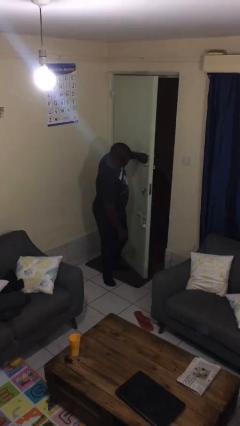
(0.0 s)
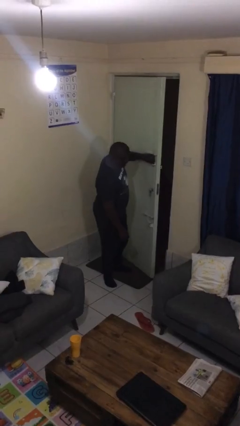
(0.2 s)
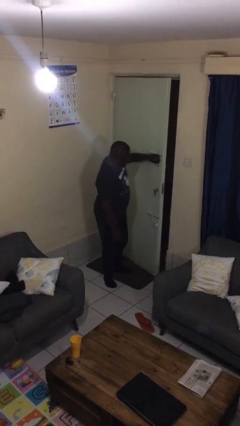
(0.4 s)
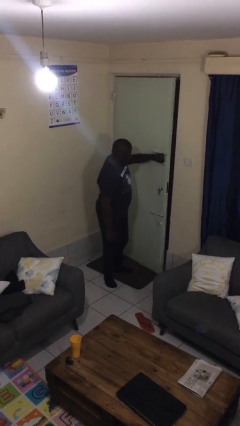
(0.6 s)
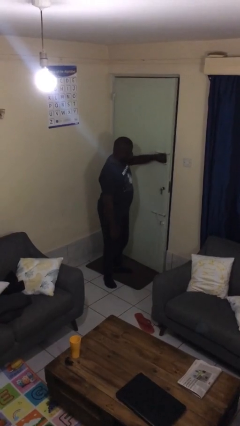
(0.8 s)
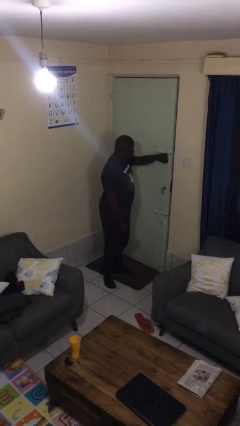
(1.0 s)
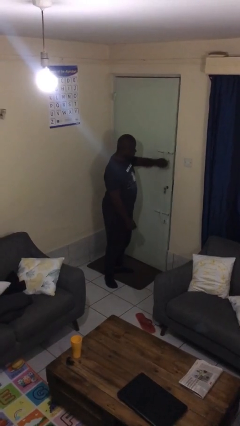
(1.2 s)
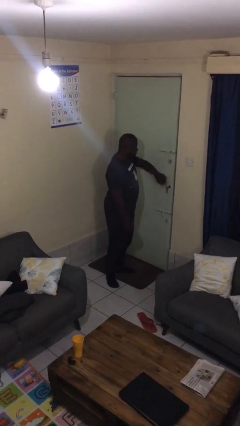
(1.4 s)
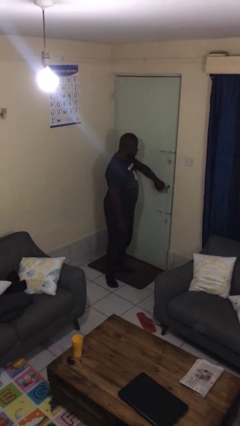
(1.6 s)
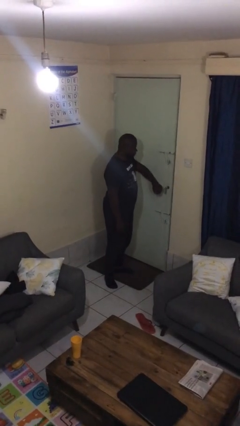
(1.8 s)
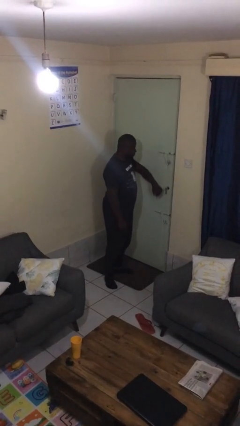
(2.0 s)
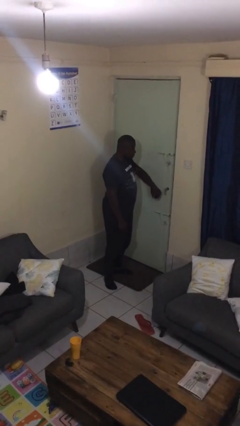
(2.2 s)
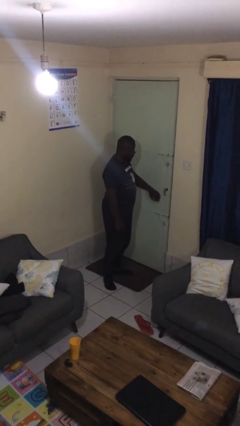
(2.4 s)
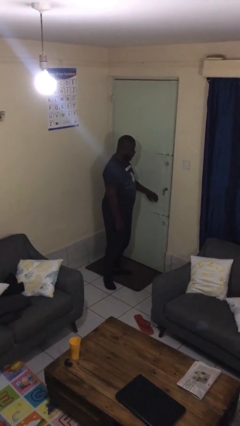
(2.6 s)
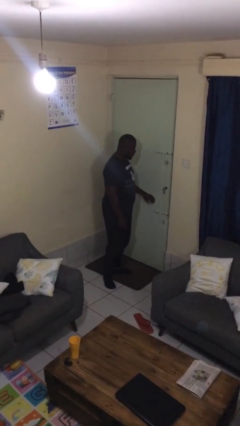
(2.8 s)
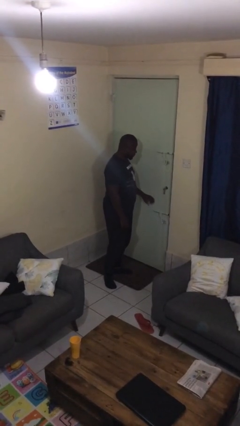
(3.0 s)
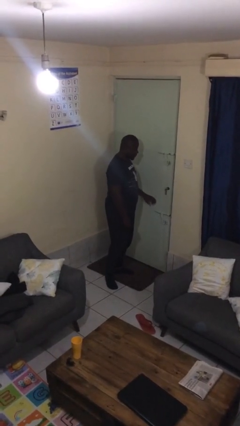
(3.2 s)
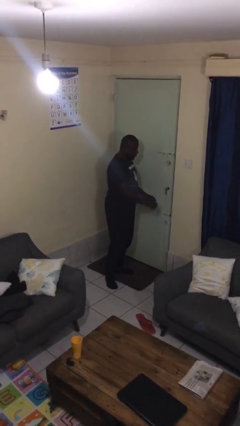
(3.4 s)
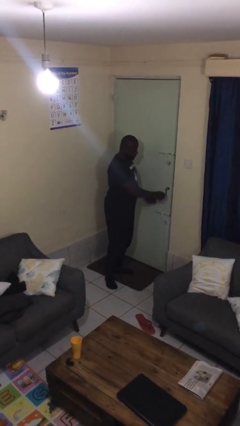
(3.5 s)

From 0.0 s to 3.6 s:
person closes facility door

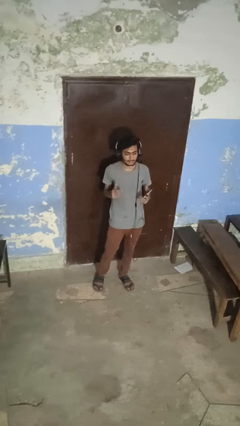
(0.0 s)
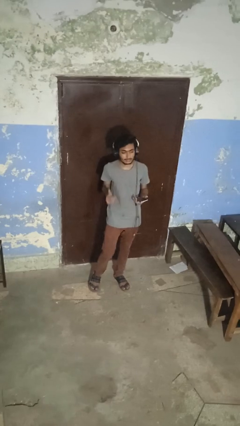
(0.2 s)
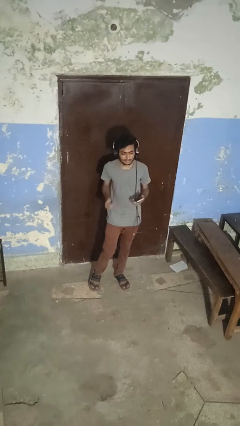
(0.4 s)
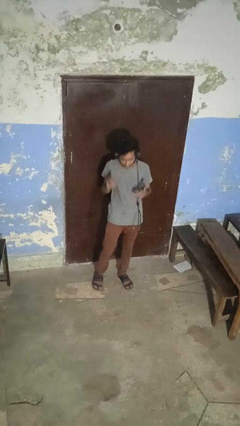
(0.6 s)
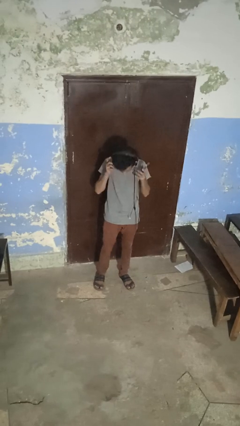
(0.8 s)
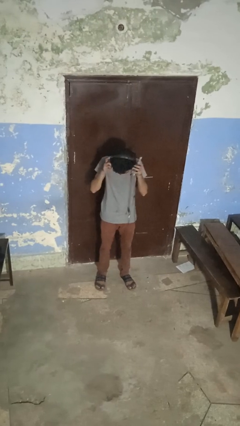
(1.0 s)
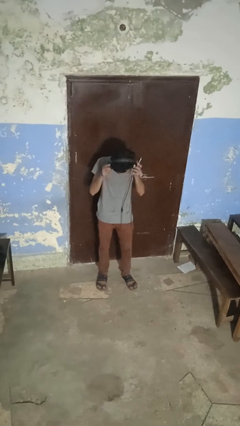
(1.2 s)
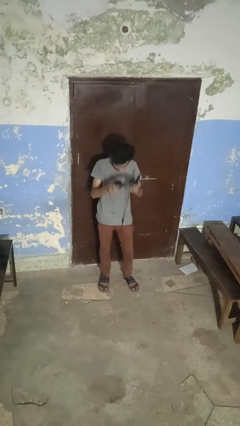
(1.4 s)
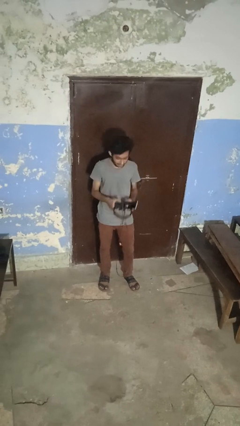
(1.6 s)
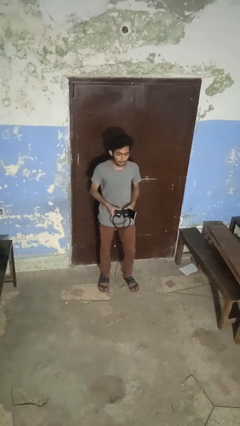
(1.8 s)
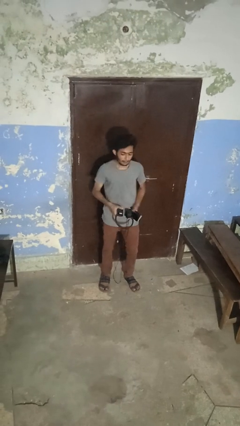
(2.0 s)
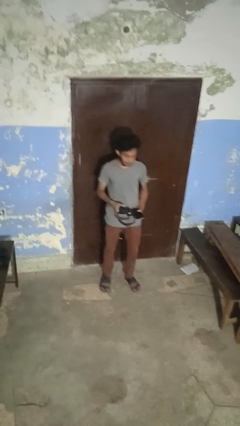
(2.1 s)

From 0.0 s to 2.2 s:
person takes off headphones

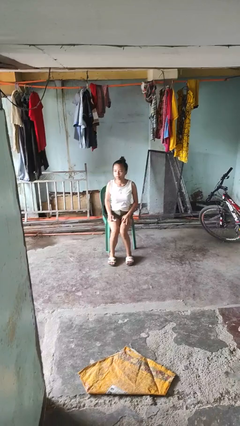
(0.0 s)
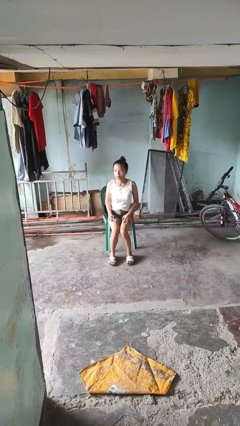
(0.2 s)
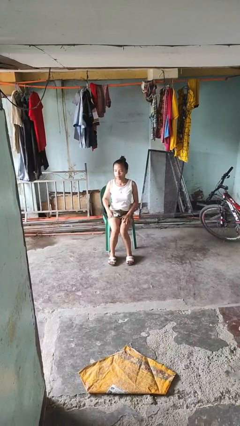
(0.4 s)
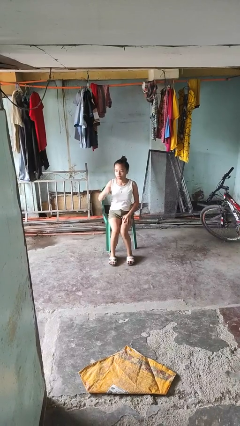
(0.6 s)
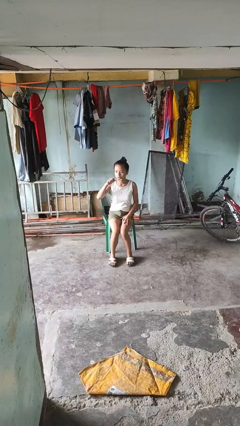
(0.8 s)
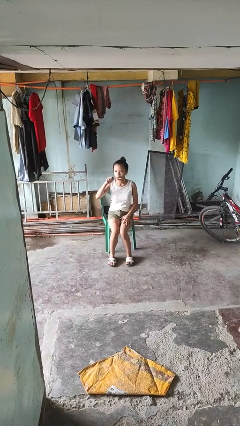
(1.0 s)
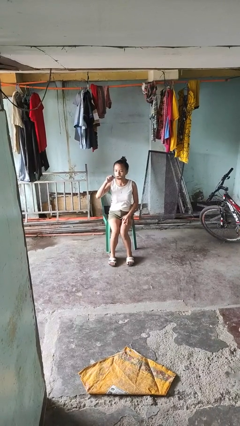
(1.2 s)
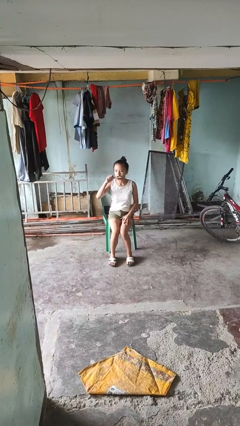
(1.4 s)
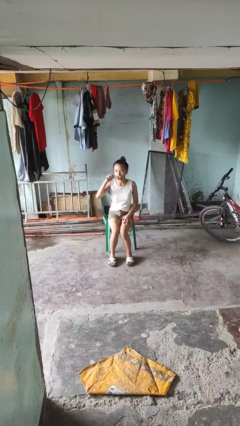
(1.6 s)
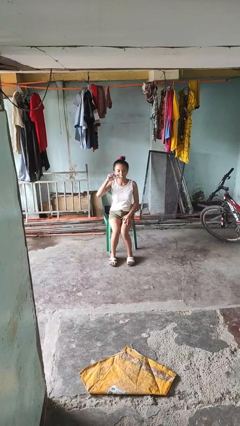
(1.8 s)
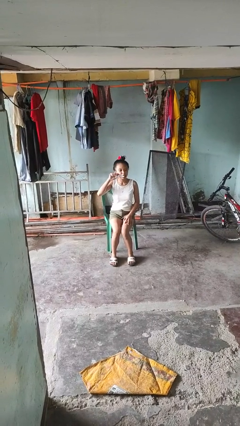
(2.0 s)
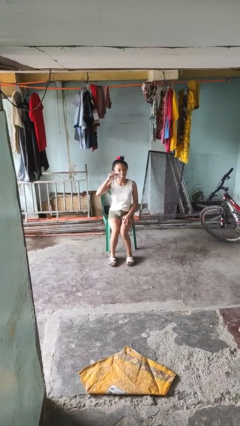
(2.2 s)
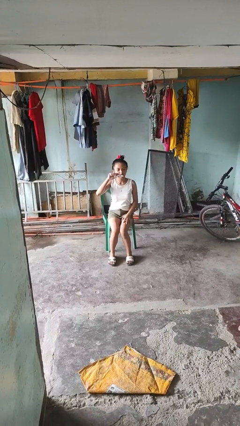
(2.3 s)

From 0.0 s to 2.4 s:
person brushes teeth

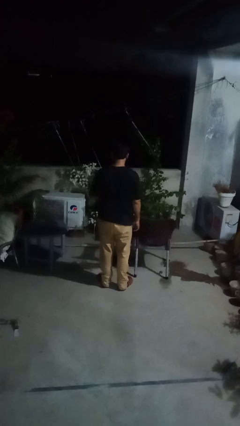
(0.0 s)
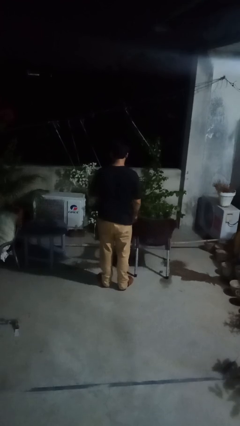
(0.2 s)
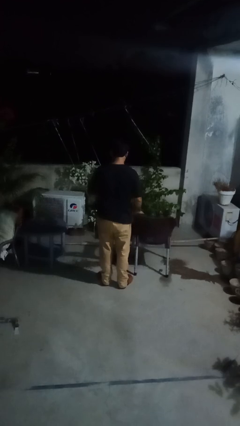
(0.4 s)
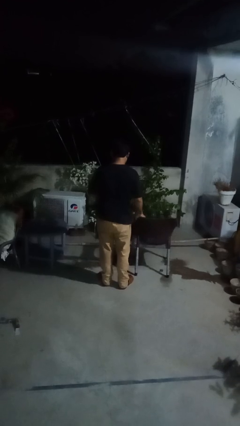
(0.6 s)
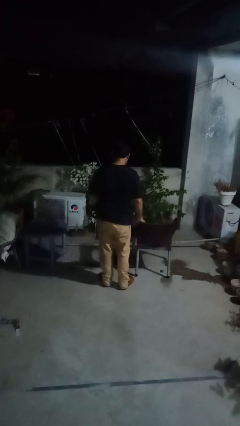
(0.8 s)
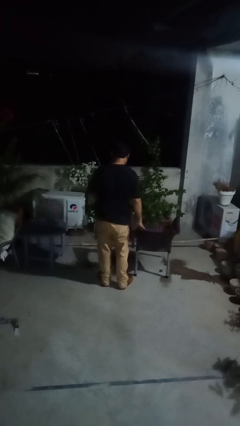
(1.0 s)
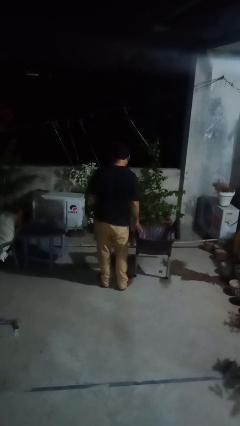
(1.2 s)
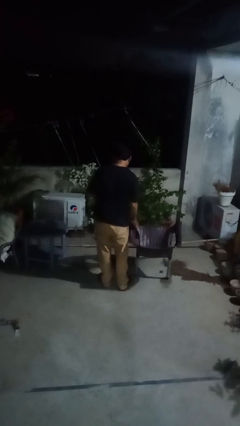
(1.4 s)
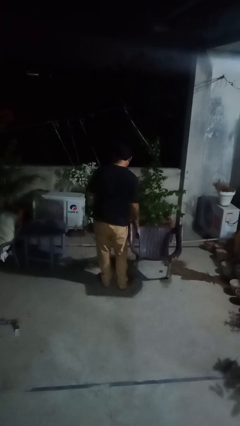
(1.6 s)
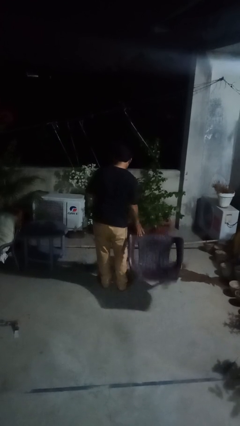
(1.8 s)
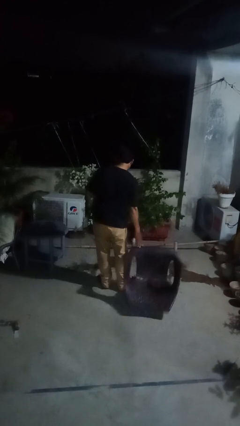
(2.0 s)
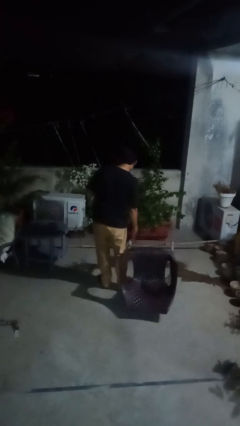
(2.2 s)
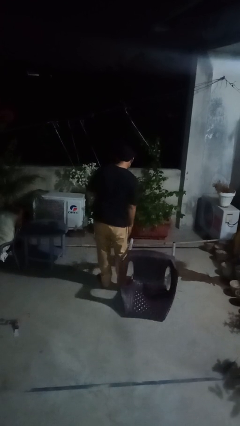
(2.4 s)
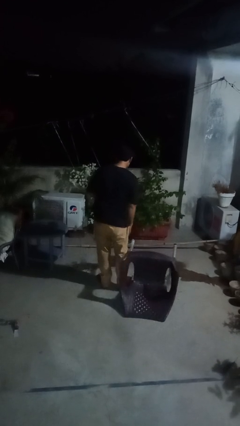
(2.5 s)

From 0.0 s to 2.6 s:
person knocks over furniture

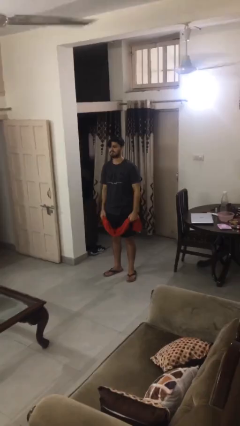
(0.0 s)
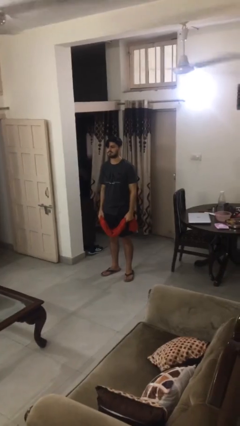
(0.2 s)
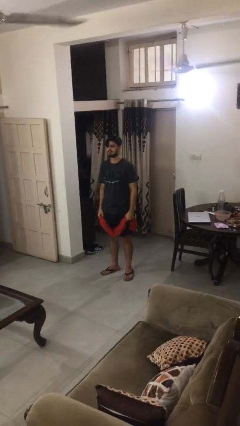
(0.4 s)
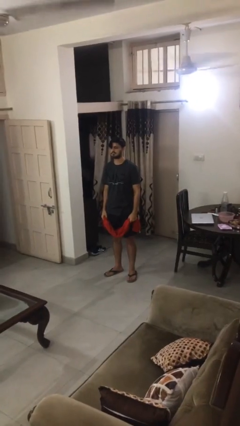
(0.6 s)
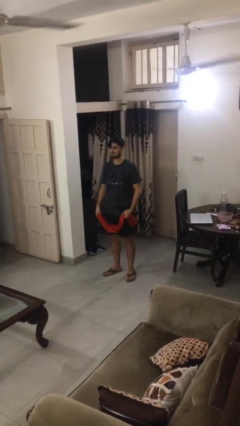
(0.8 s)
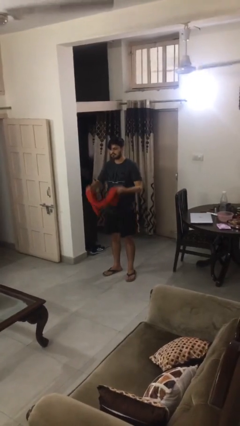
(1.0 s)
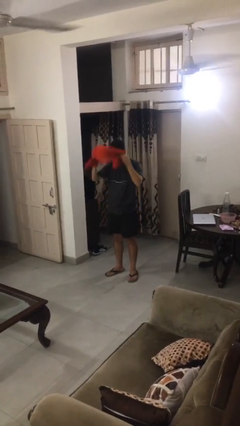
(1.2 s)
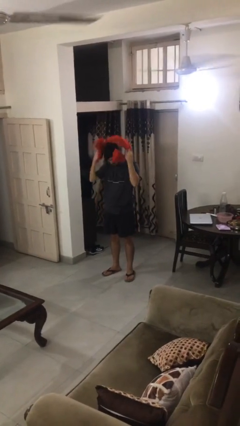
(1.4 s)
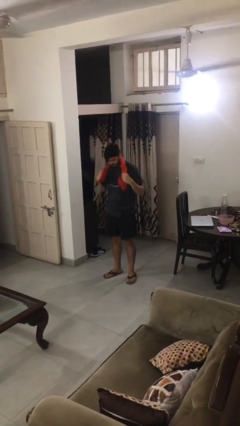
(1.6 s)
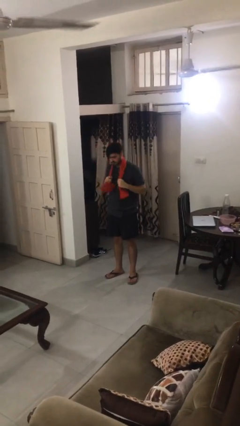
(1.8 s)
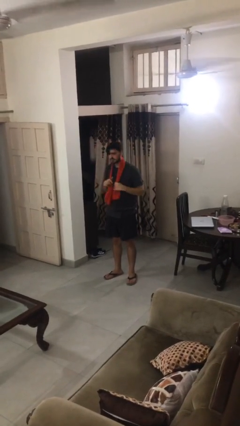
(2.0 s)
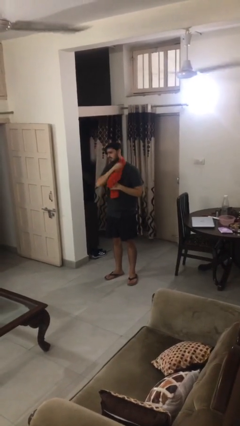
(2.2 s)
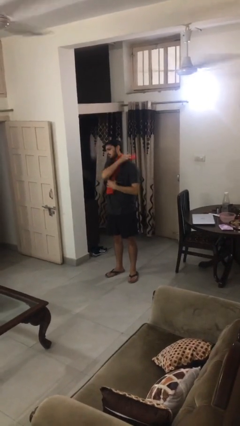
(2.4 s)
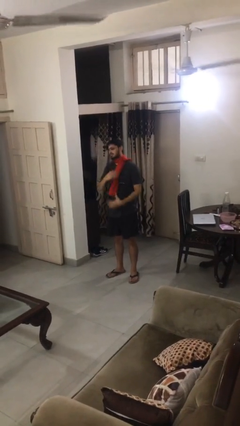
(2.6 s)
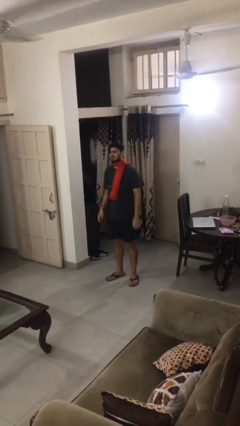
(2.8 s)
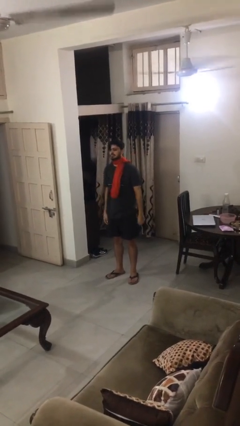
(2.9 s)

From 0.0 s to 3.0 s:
person puts on scarf

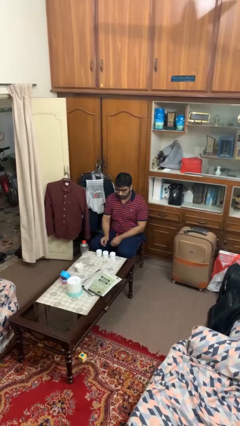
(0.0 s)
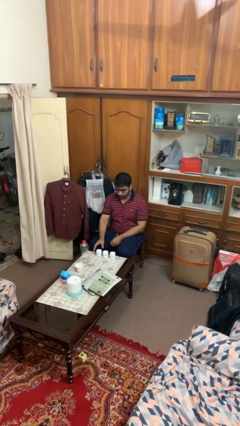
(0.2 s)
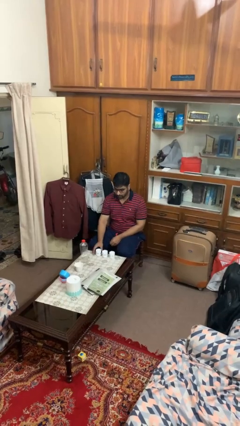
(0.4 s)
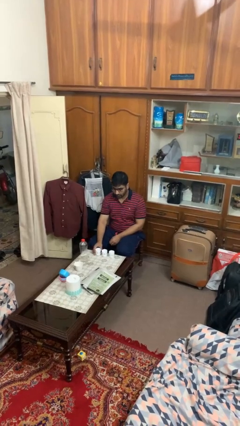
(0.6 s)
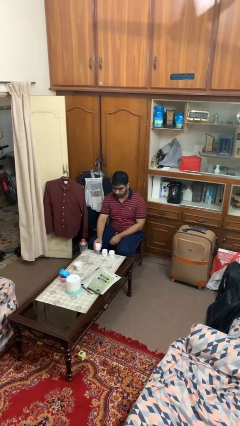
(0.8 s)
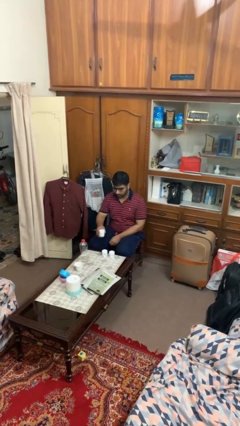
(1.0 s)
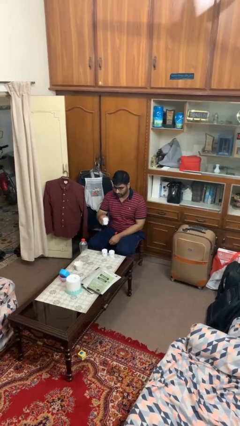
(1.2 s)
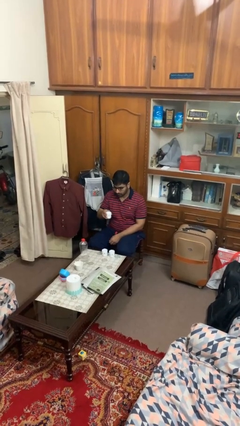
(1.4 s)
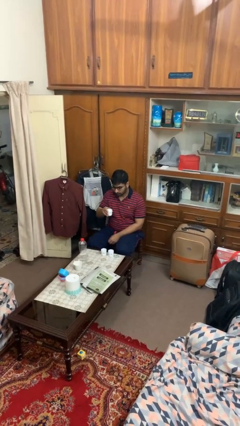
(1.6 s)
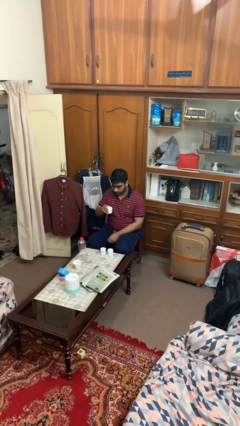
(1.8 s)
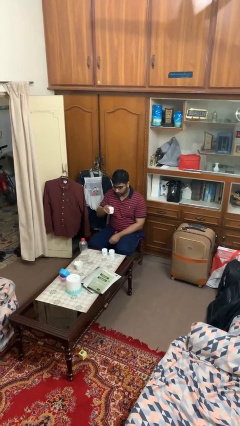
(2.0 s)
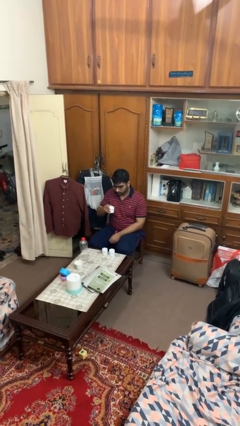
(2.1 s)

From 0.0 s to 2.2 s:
person picks up object from table

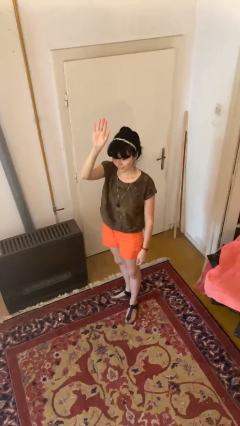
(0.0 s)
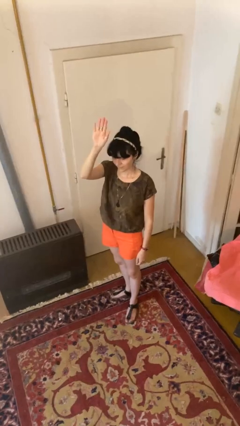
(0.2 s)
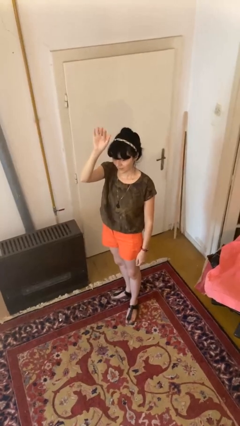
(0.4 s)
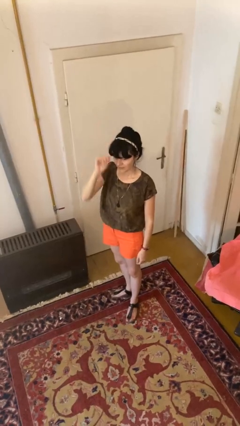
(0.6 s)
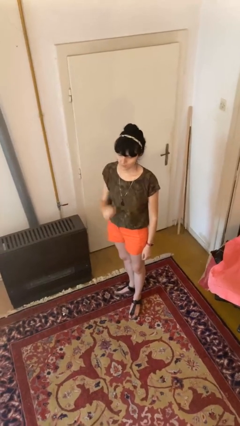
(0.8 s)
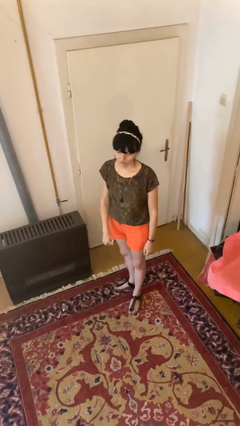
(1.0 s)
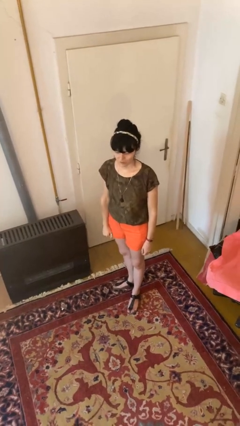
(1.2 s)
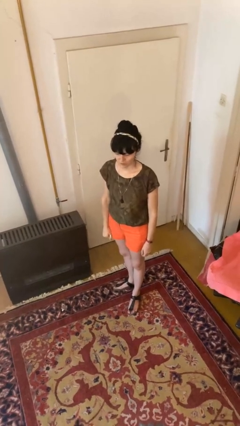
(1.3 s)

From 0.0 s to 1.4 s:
person gestures lower hand
